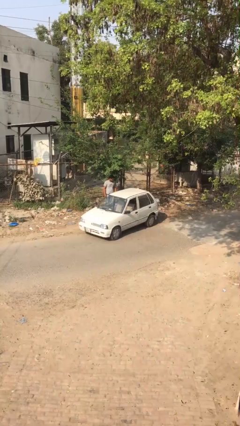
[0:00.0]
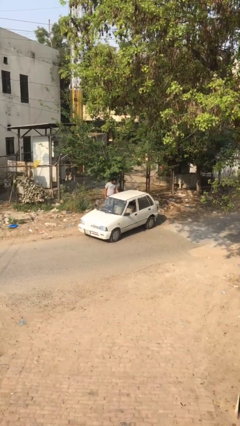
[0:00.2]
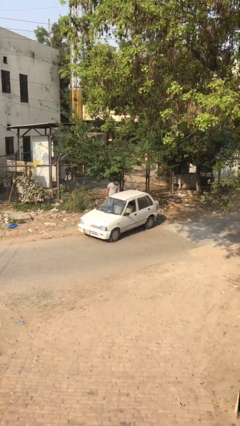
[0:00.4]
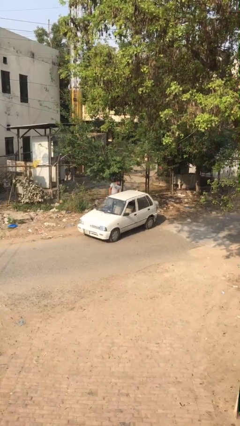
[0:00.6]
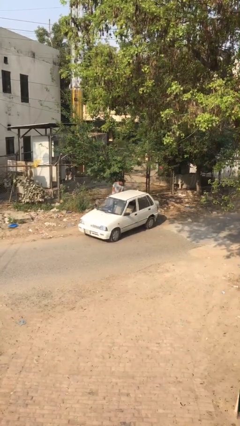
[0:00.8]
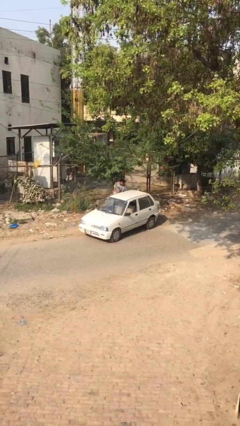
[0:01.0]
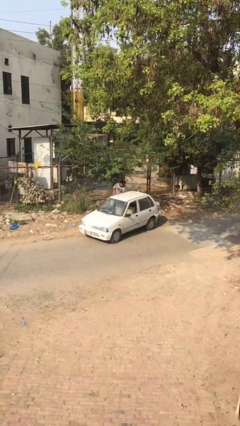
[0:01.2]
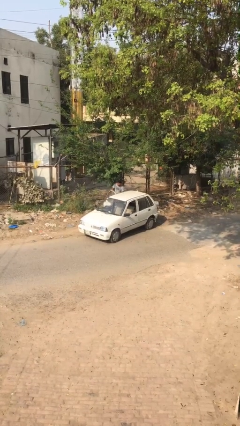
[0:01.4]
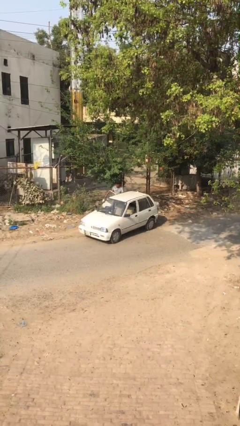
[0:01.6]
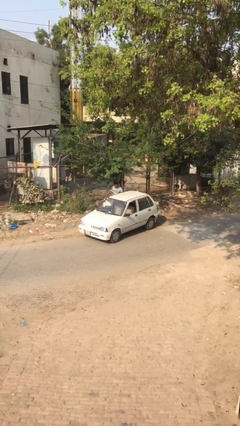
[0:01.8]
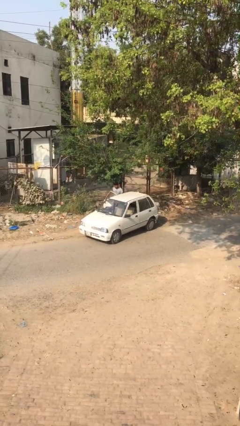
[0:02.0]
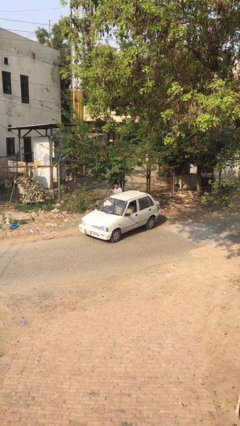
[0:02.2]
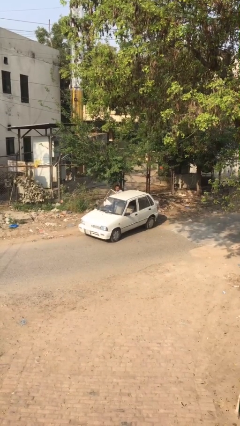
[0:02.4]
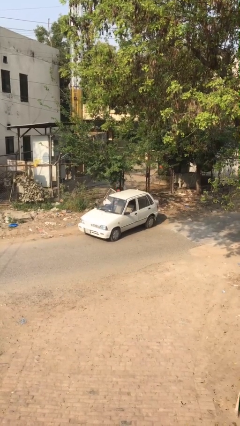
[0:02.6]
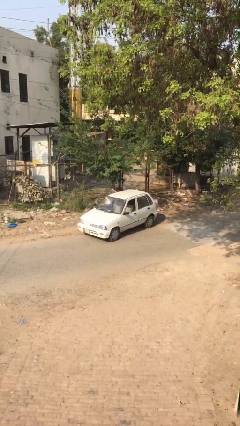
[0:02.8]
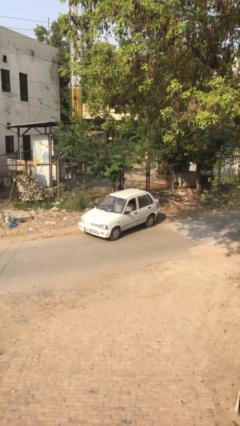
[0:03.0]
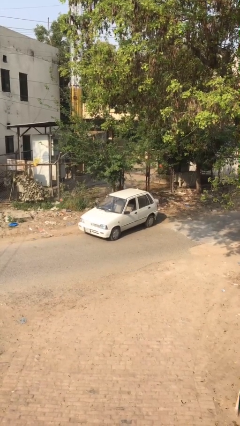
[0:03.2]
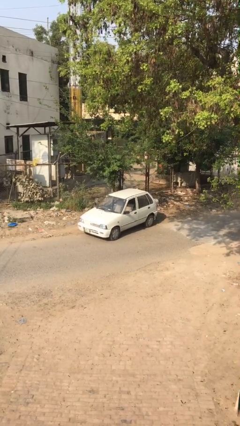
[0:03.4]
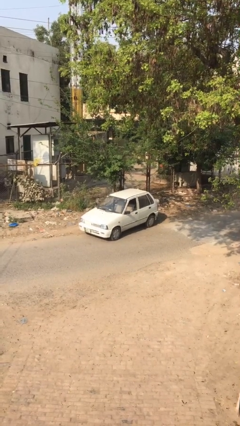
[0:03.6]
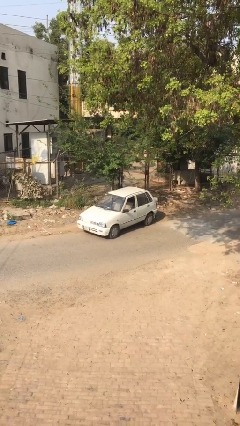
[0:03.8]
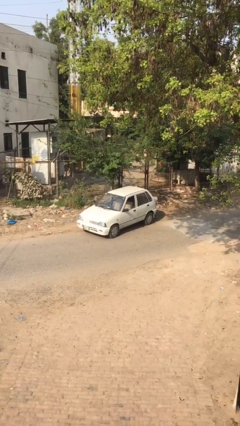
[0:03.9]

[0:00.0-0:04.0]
car picks up person

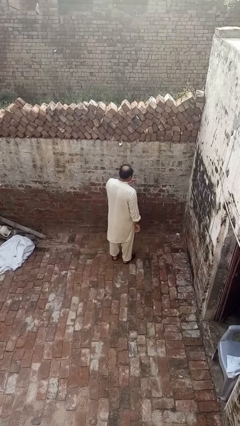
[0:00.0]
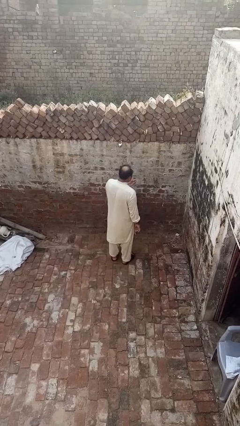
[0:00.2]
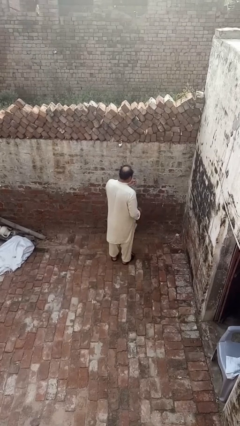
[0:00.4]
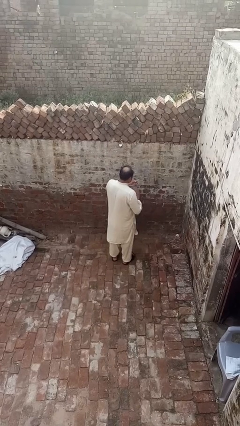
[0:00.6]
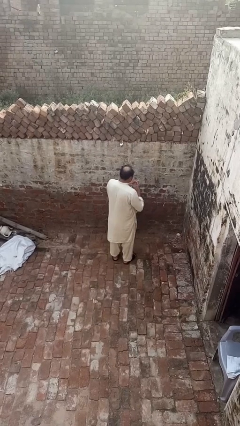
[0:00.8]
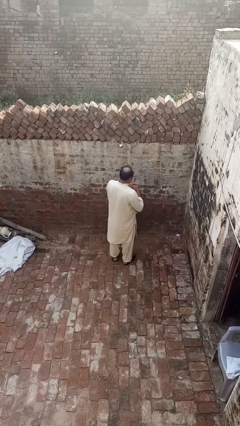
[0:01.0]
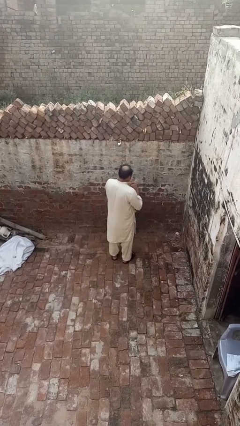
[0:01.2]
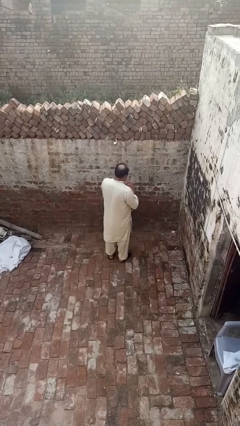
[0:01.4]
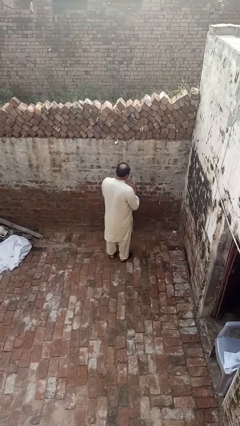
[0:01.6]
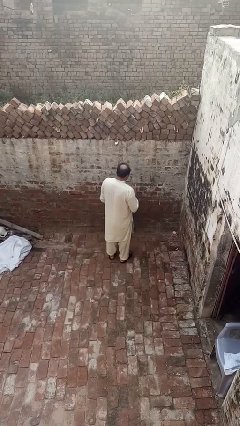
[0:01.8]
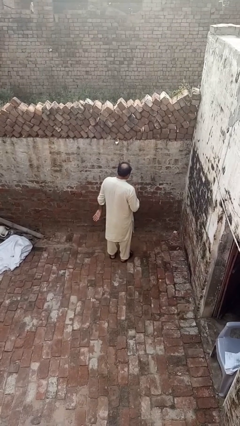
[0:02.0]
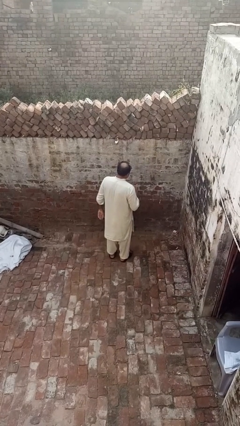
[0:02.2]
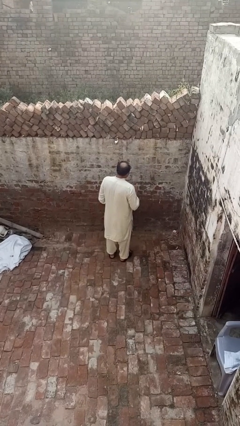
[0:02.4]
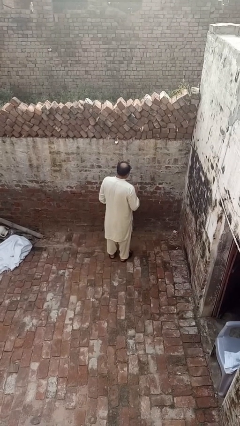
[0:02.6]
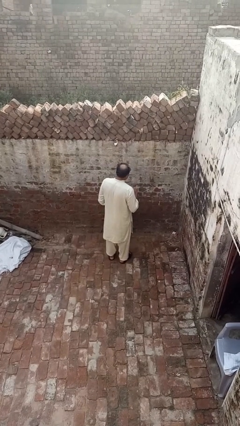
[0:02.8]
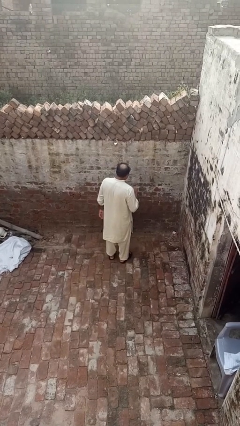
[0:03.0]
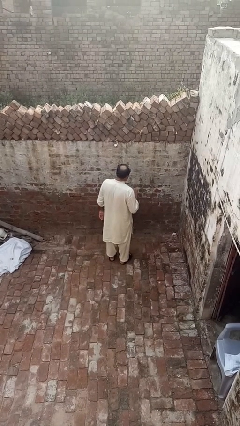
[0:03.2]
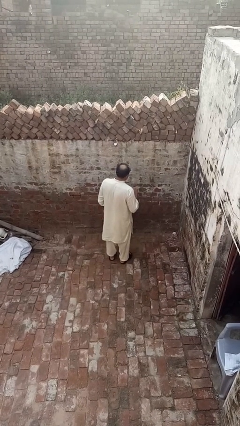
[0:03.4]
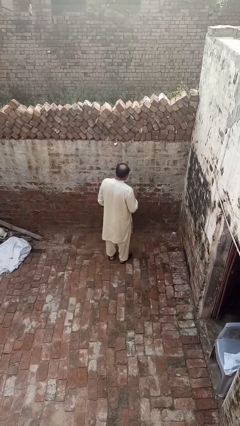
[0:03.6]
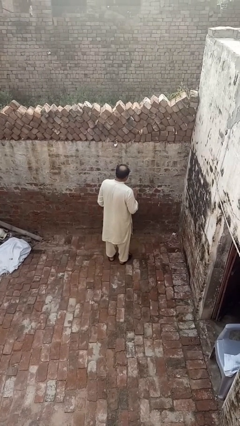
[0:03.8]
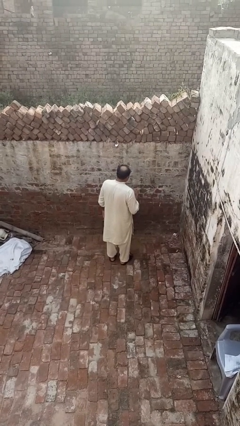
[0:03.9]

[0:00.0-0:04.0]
person puts on ring

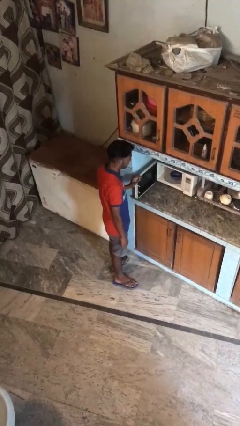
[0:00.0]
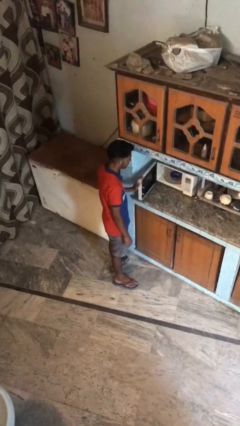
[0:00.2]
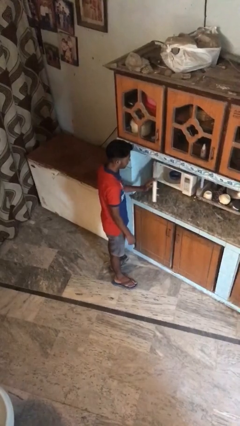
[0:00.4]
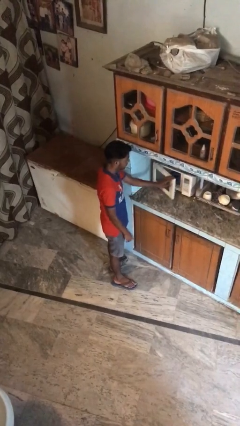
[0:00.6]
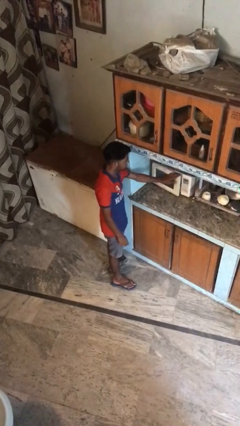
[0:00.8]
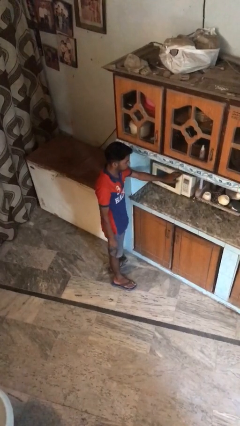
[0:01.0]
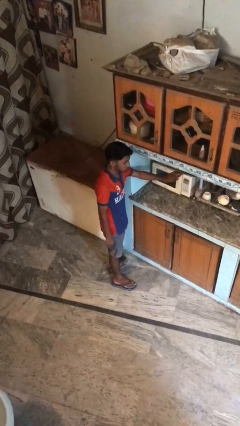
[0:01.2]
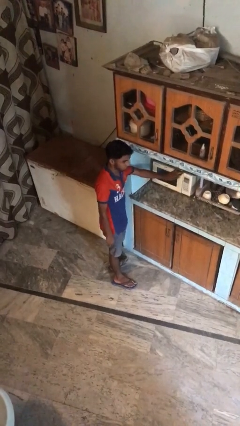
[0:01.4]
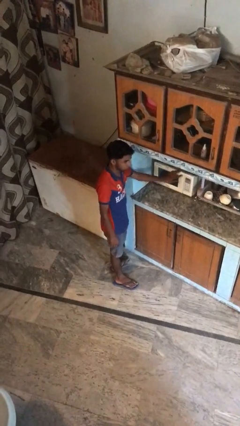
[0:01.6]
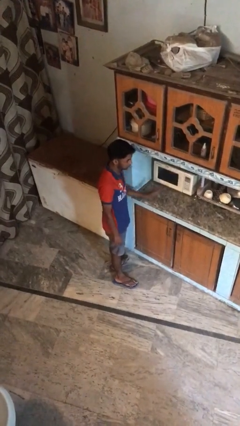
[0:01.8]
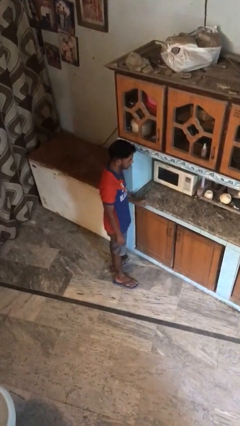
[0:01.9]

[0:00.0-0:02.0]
person closes oven door

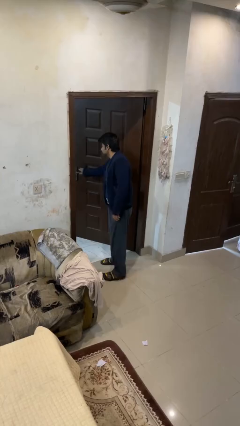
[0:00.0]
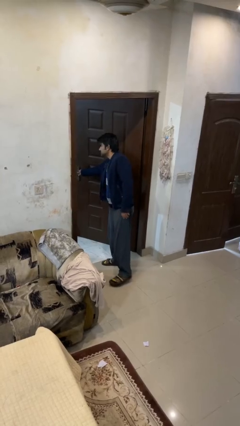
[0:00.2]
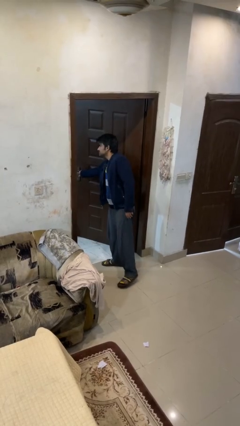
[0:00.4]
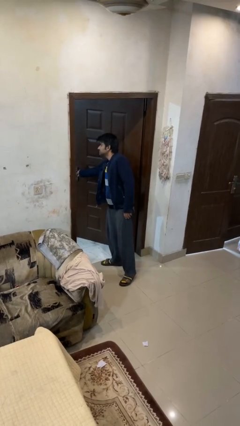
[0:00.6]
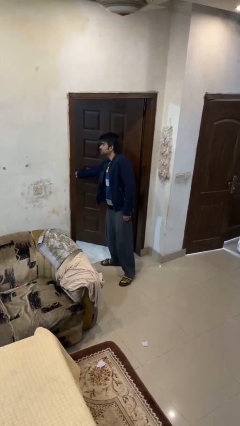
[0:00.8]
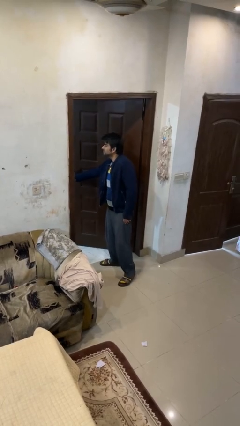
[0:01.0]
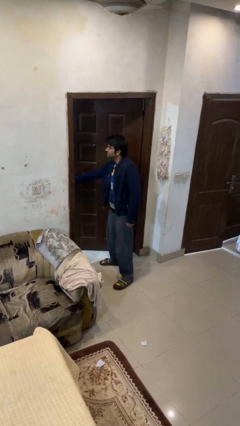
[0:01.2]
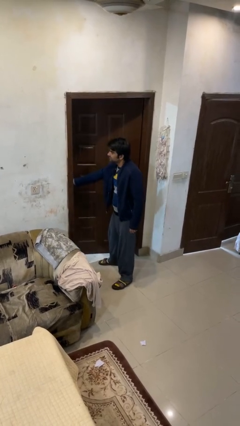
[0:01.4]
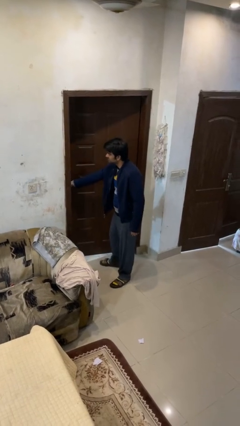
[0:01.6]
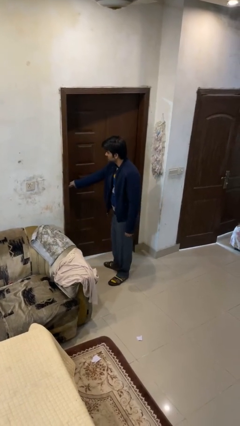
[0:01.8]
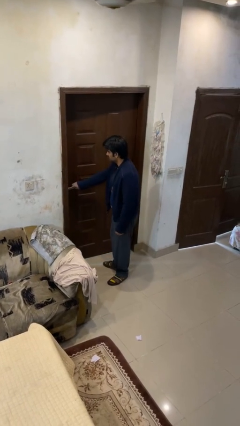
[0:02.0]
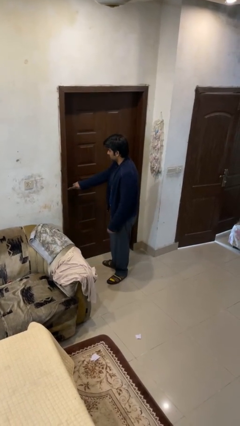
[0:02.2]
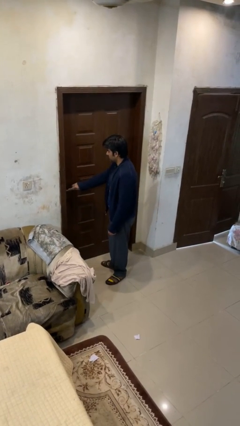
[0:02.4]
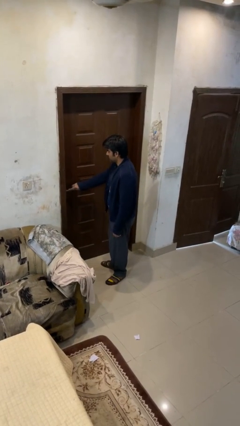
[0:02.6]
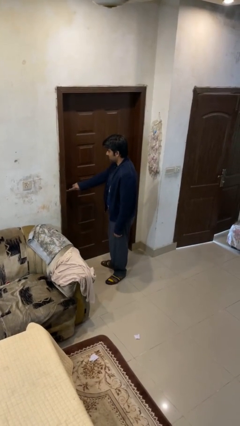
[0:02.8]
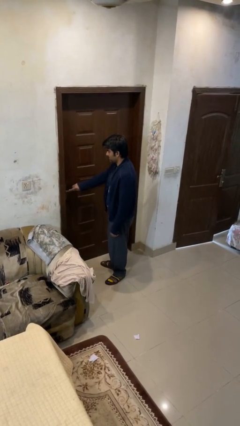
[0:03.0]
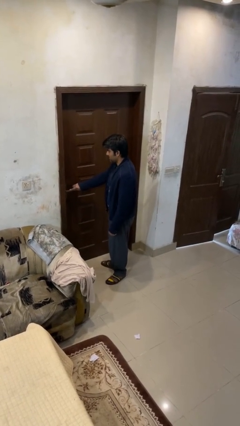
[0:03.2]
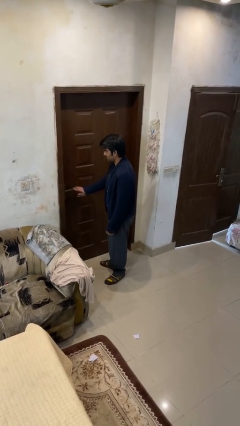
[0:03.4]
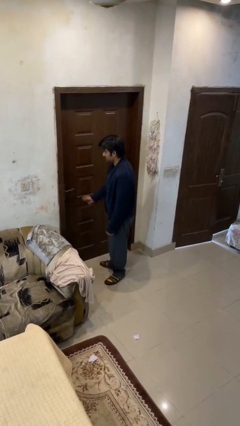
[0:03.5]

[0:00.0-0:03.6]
person closes facility door

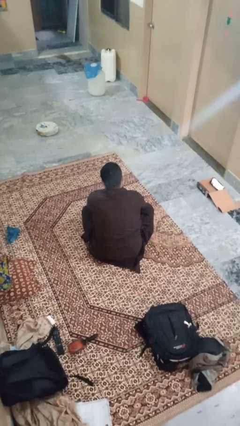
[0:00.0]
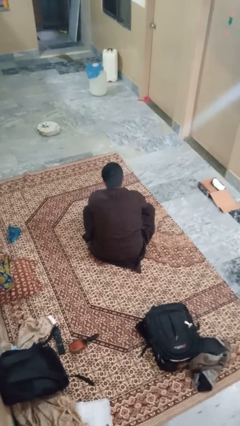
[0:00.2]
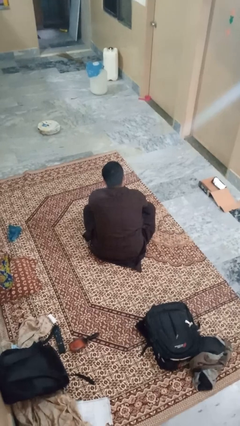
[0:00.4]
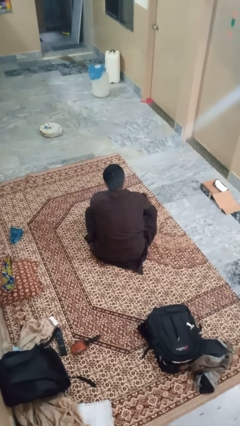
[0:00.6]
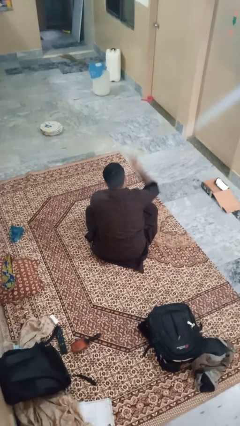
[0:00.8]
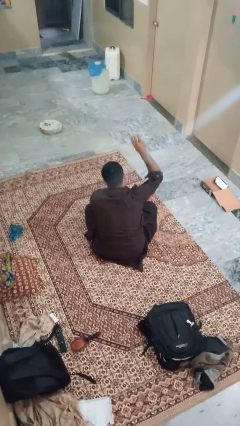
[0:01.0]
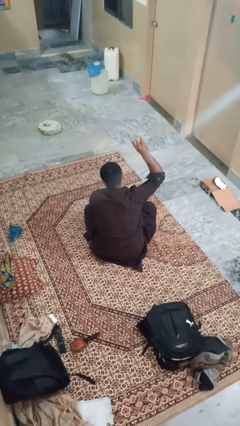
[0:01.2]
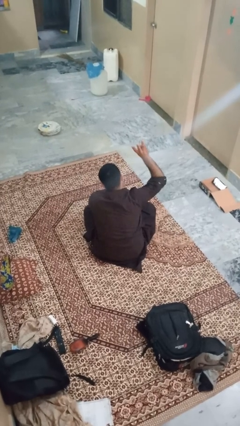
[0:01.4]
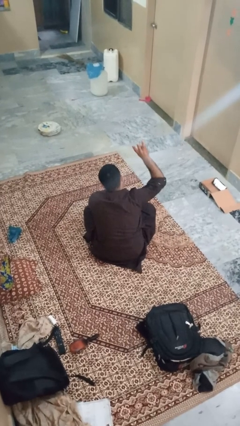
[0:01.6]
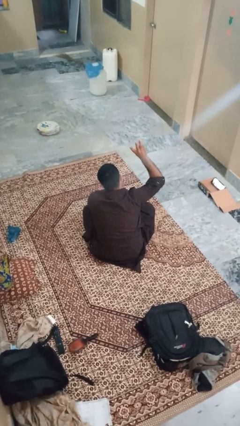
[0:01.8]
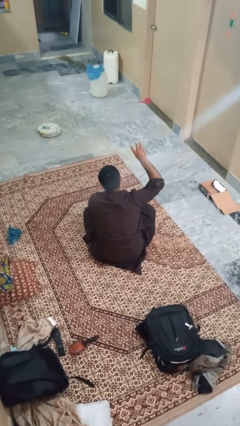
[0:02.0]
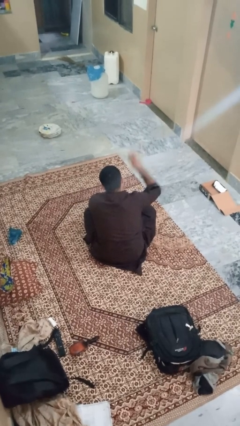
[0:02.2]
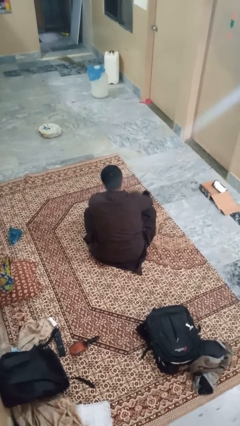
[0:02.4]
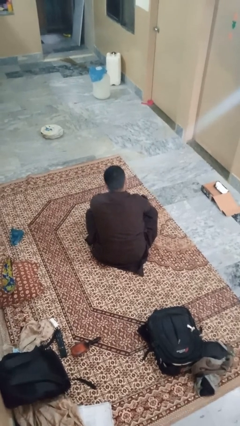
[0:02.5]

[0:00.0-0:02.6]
person gestures number three

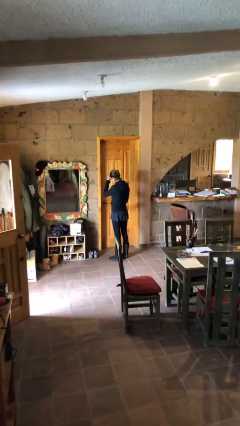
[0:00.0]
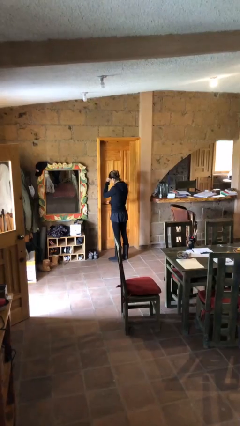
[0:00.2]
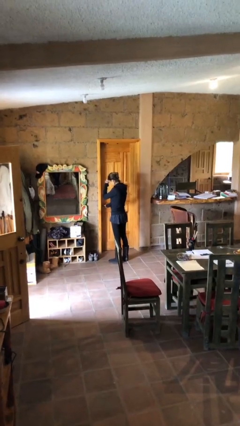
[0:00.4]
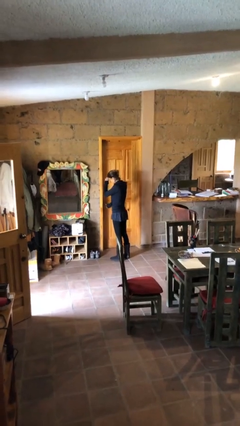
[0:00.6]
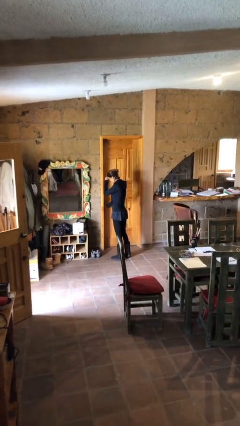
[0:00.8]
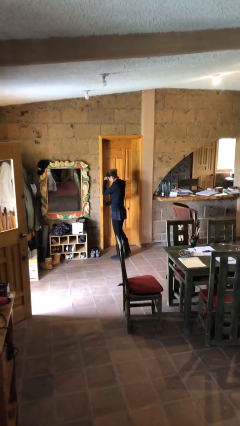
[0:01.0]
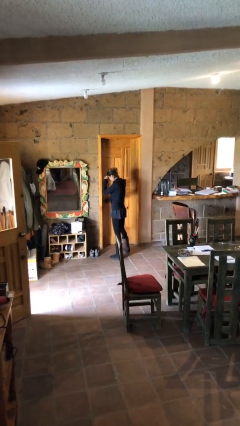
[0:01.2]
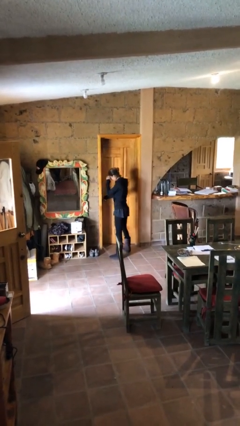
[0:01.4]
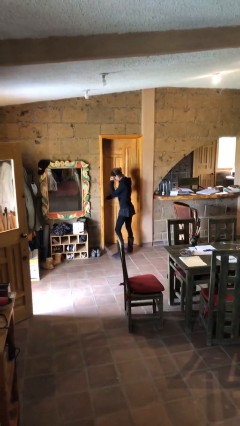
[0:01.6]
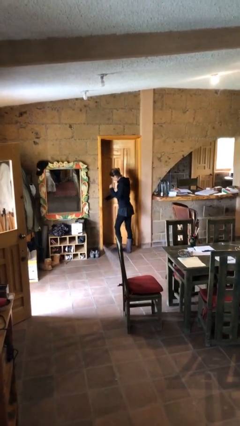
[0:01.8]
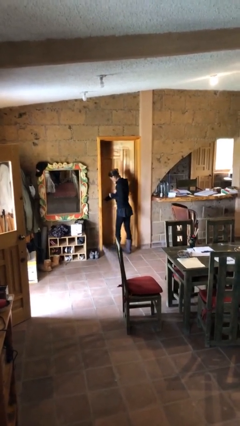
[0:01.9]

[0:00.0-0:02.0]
person opens facility door
